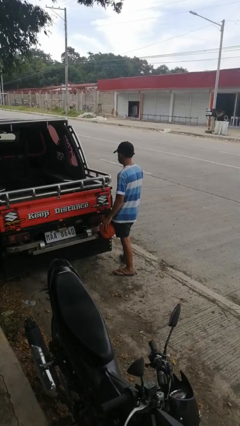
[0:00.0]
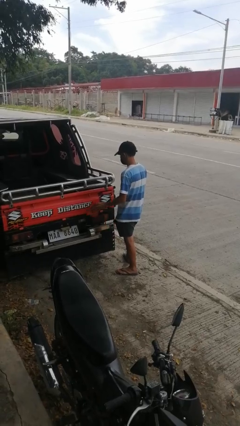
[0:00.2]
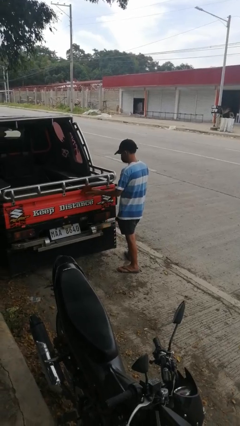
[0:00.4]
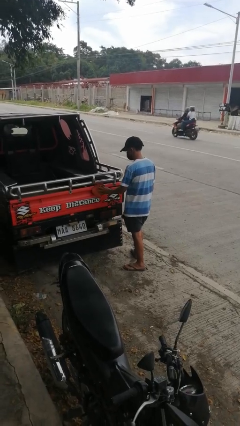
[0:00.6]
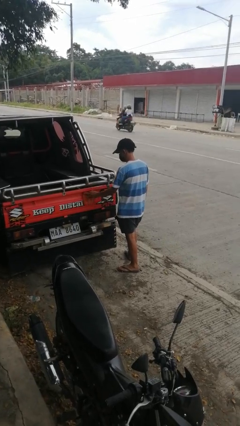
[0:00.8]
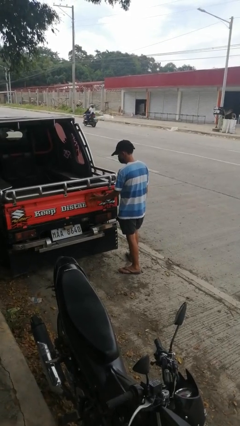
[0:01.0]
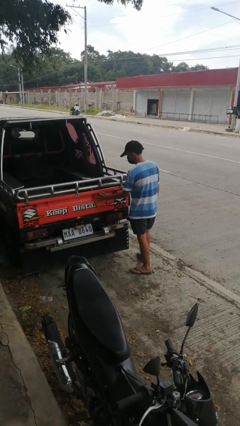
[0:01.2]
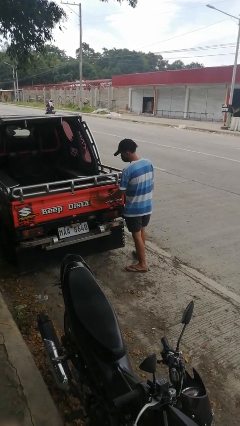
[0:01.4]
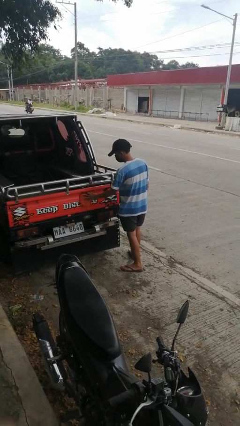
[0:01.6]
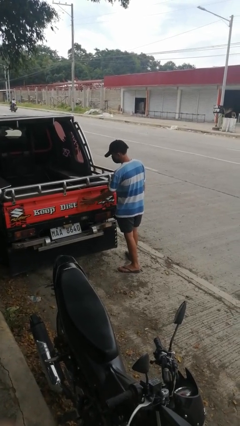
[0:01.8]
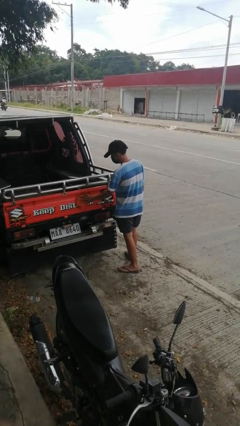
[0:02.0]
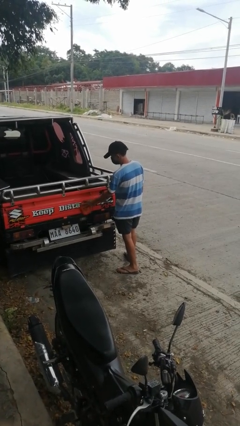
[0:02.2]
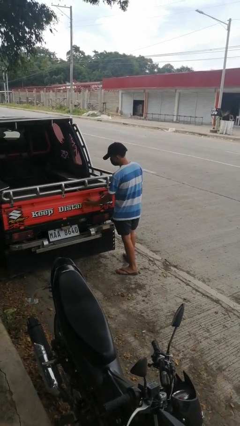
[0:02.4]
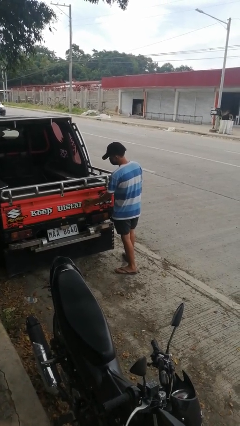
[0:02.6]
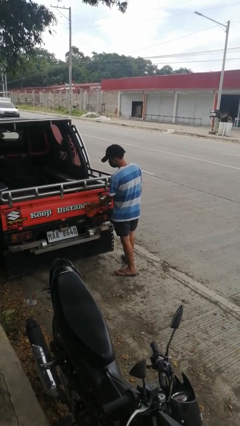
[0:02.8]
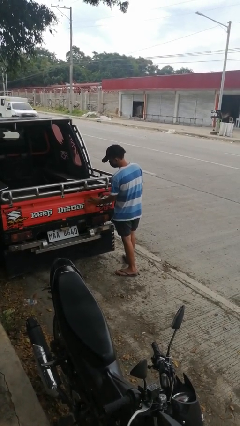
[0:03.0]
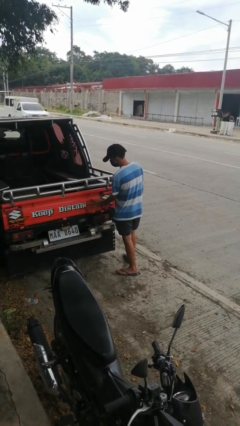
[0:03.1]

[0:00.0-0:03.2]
person polishes car with rag

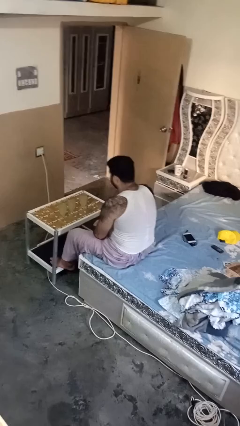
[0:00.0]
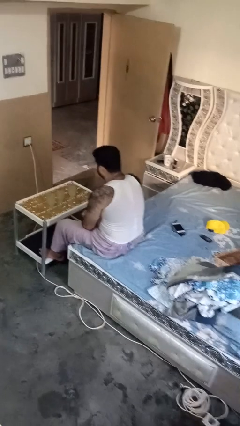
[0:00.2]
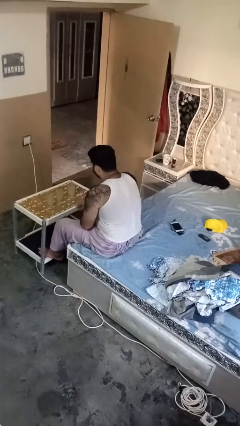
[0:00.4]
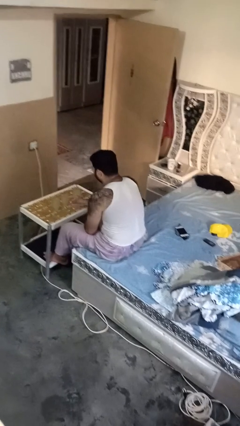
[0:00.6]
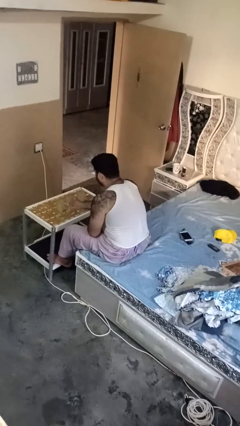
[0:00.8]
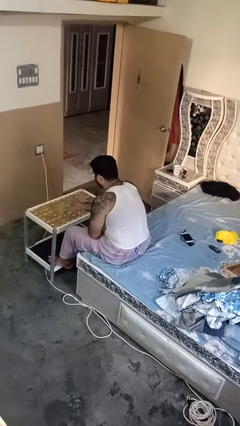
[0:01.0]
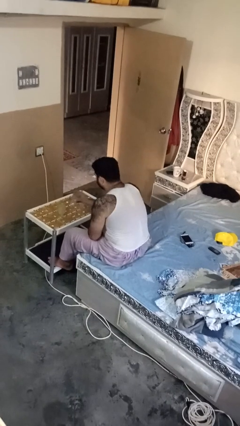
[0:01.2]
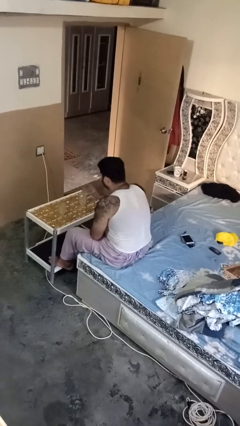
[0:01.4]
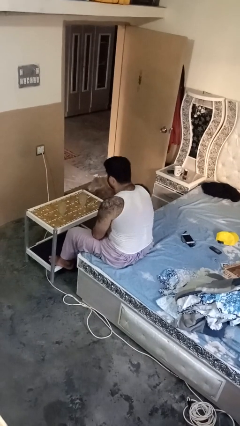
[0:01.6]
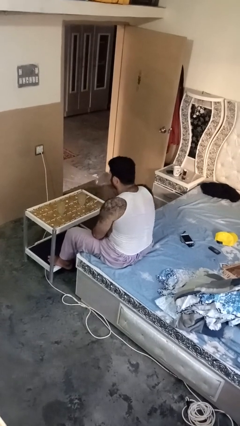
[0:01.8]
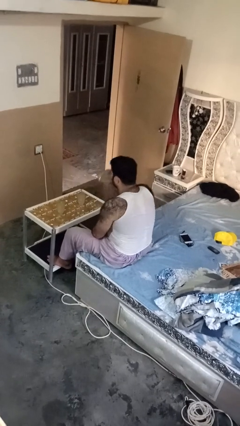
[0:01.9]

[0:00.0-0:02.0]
person picks up object from table

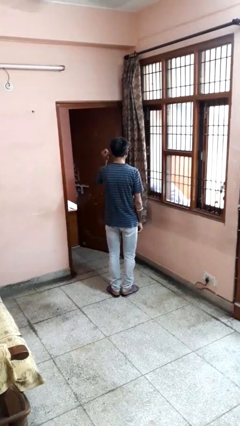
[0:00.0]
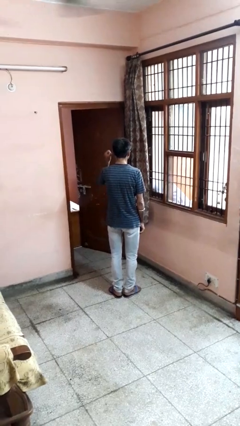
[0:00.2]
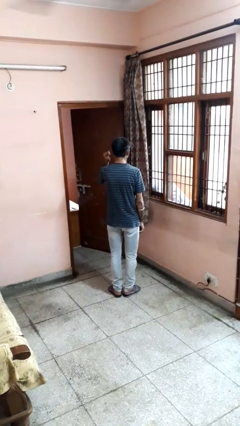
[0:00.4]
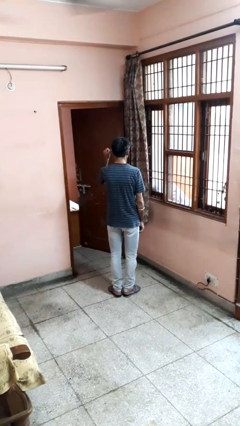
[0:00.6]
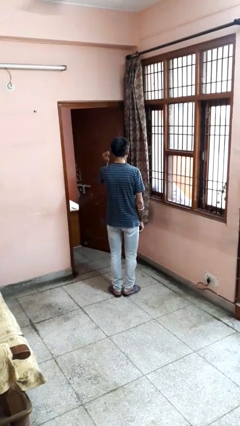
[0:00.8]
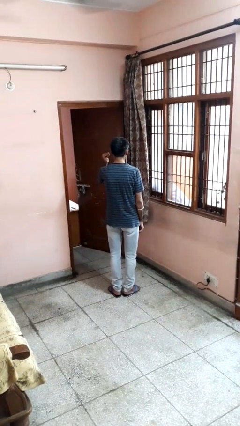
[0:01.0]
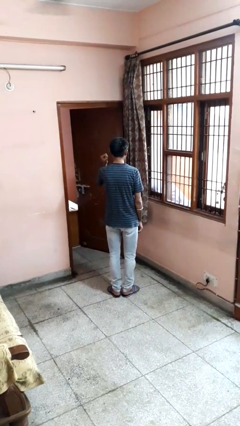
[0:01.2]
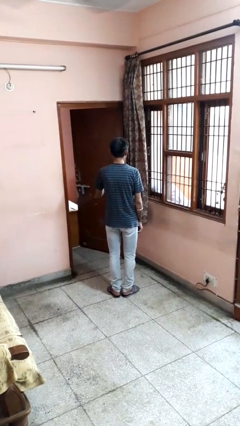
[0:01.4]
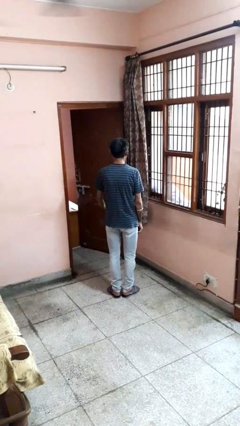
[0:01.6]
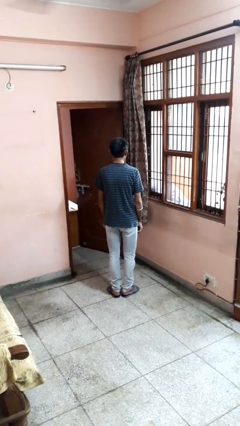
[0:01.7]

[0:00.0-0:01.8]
person gestures behind me

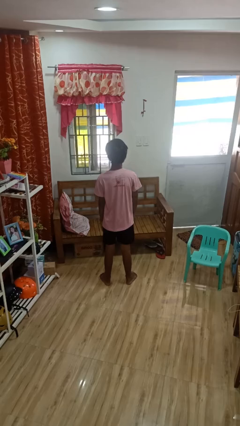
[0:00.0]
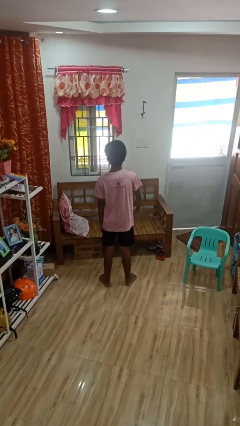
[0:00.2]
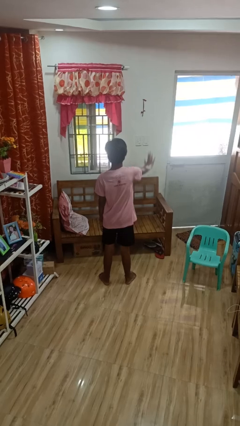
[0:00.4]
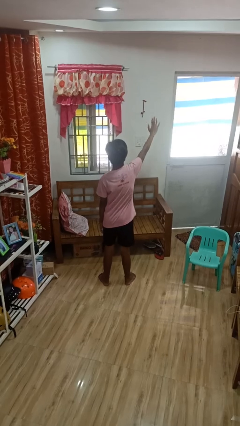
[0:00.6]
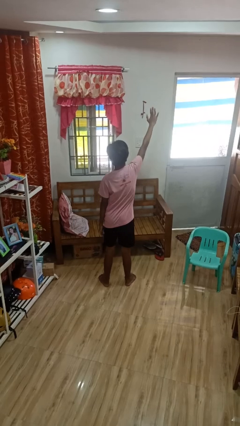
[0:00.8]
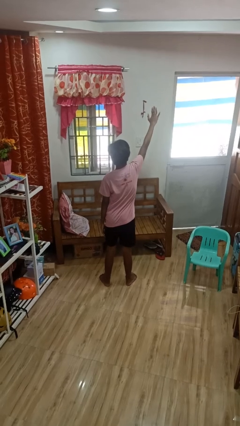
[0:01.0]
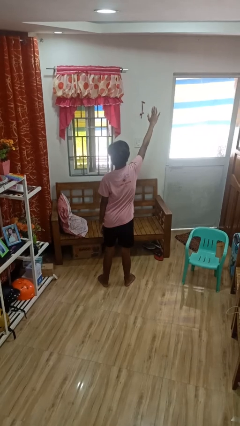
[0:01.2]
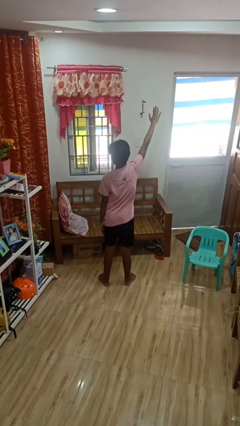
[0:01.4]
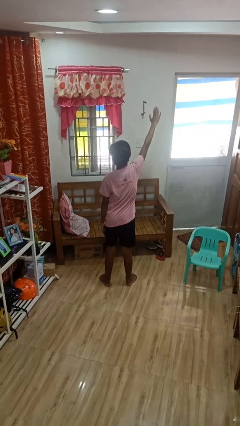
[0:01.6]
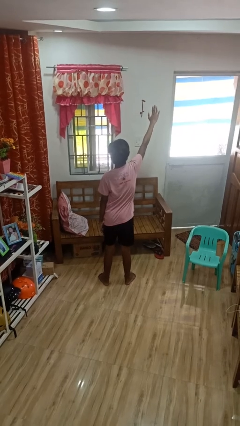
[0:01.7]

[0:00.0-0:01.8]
person gestures stop

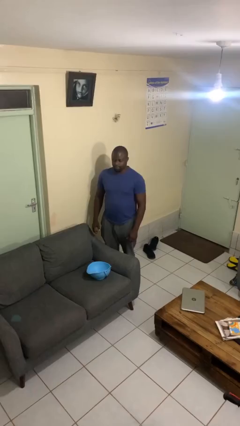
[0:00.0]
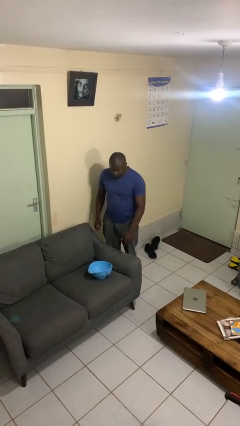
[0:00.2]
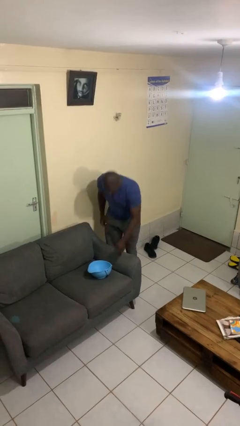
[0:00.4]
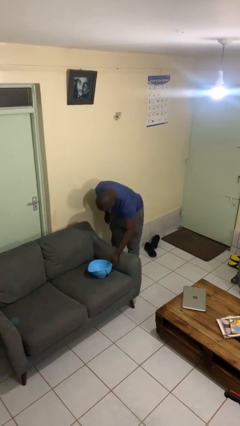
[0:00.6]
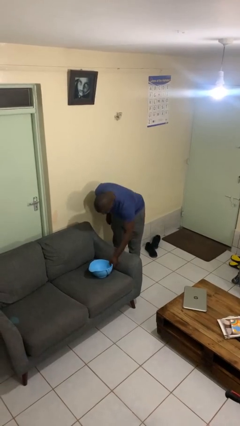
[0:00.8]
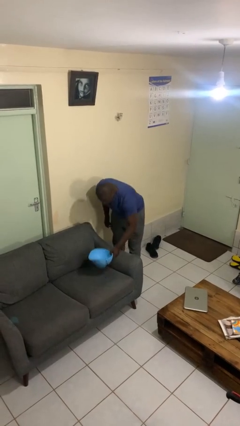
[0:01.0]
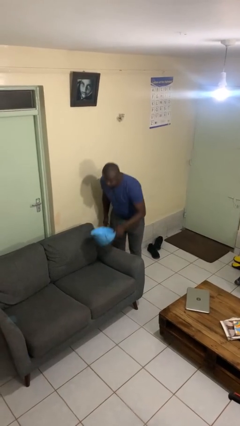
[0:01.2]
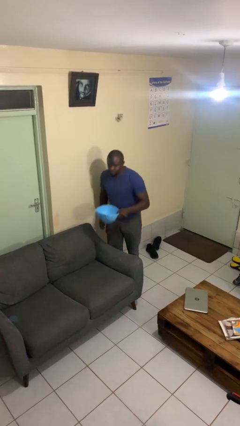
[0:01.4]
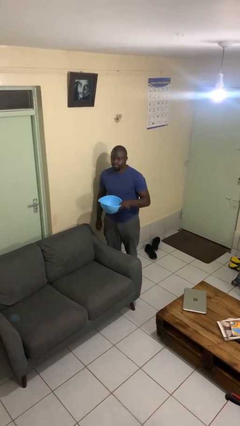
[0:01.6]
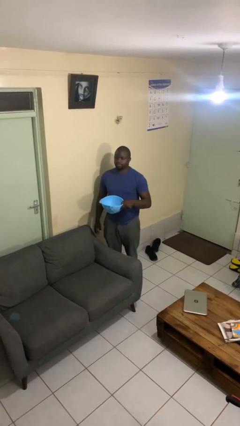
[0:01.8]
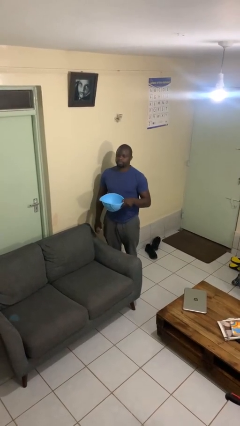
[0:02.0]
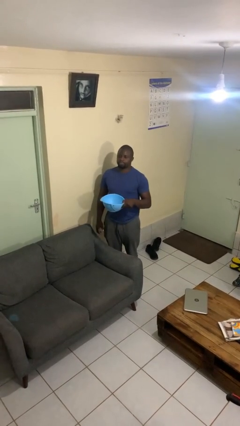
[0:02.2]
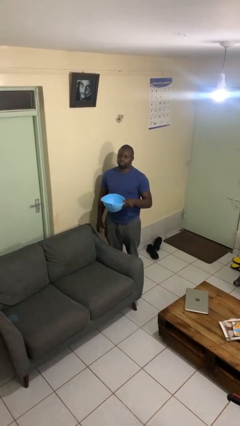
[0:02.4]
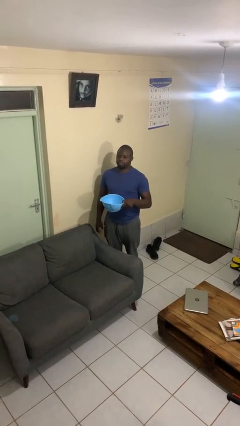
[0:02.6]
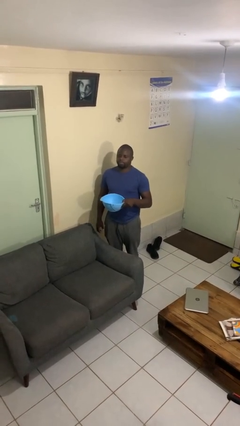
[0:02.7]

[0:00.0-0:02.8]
person picks up object from couch

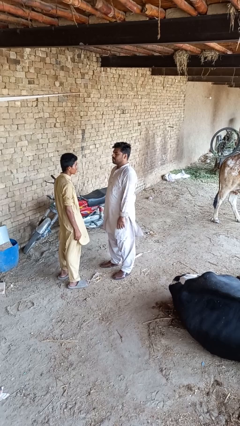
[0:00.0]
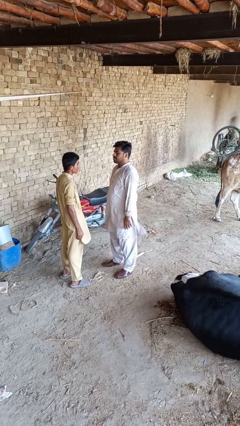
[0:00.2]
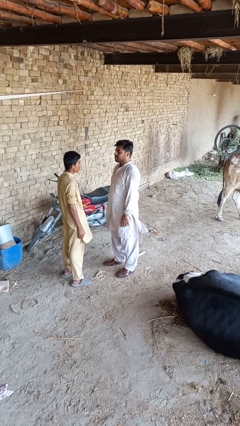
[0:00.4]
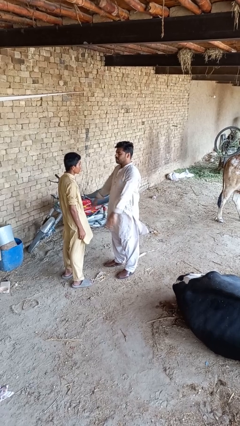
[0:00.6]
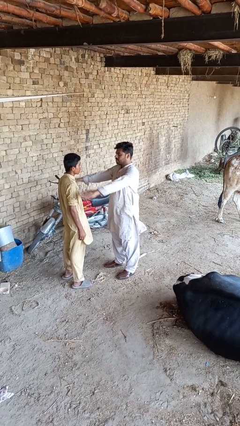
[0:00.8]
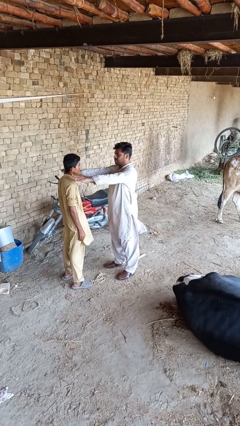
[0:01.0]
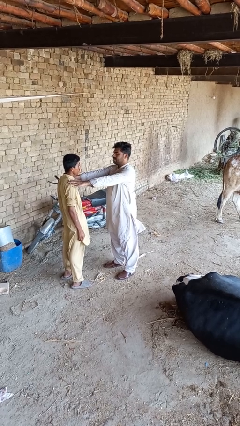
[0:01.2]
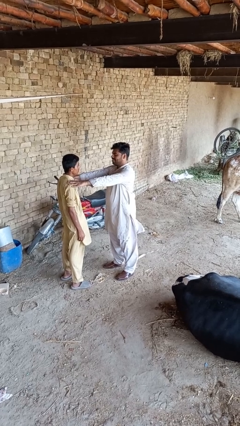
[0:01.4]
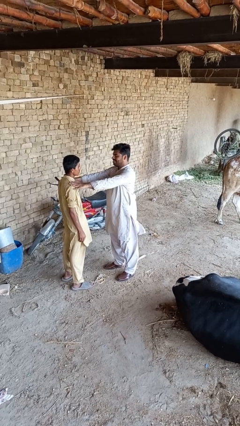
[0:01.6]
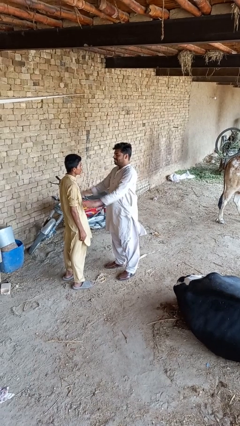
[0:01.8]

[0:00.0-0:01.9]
person pounds shoulders of person

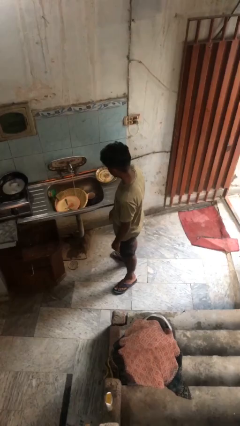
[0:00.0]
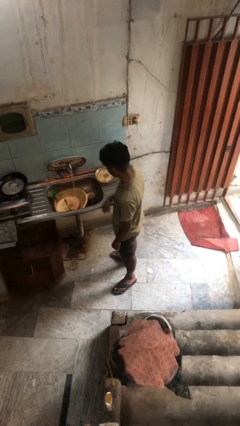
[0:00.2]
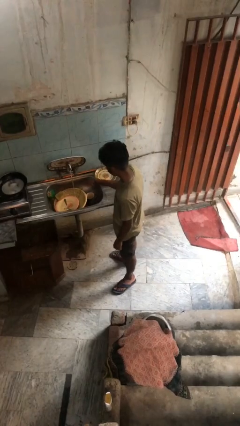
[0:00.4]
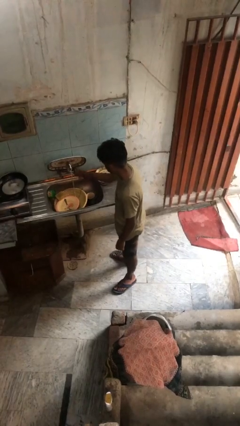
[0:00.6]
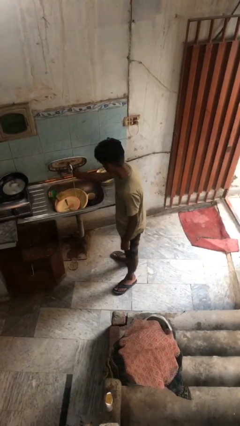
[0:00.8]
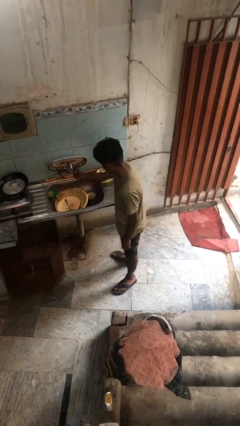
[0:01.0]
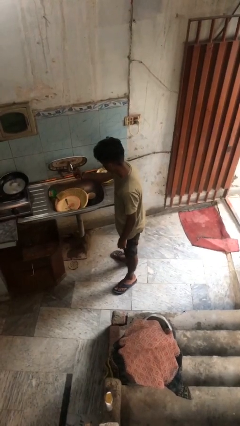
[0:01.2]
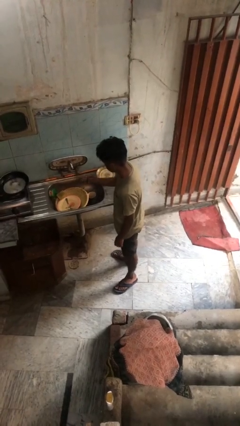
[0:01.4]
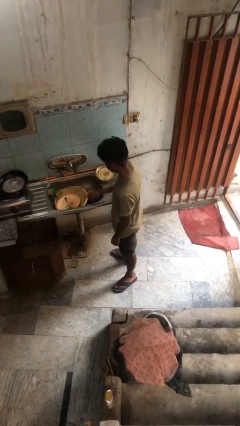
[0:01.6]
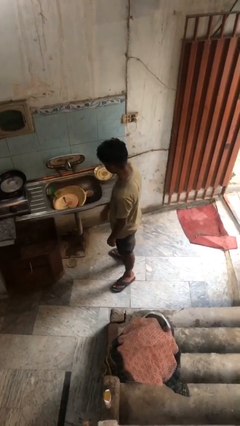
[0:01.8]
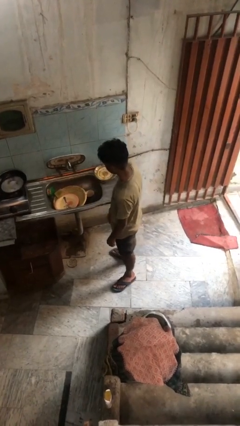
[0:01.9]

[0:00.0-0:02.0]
person turns off faucet

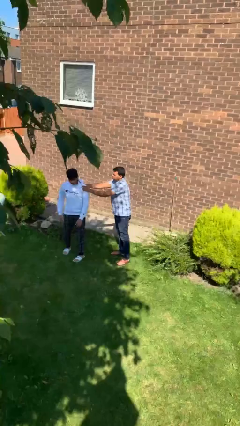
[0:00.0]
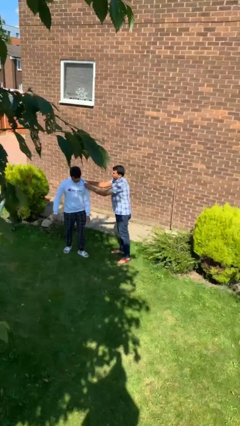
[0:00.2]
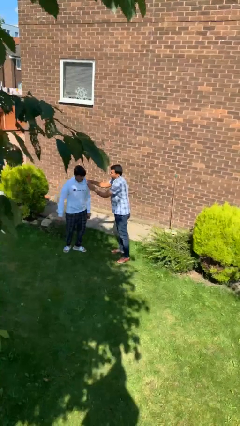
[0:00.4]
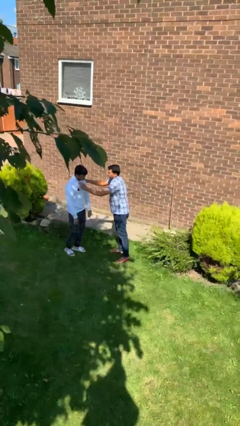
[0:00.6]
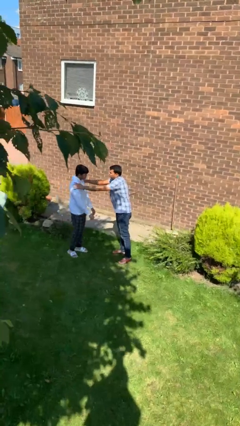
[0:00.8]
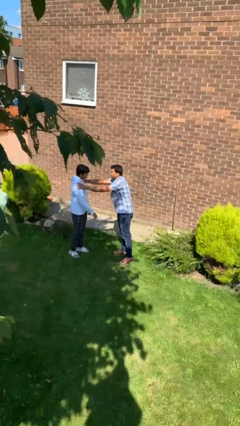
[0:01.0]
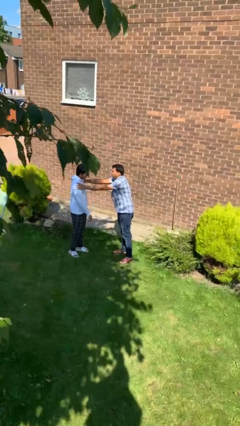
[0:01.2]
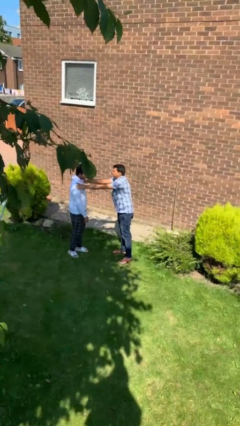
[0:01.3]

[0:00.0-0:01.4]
person spins person around
